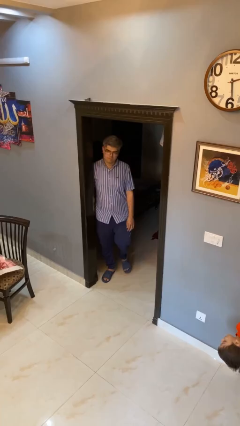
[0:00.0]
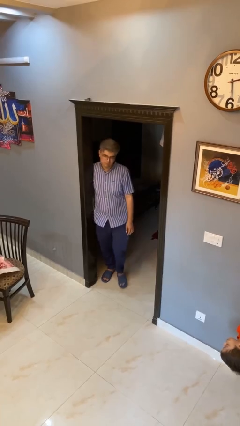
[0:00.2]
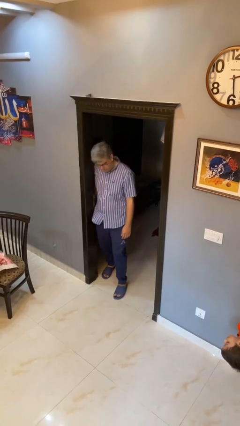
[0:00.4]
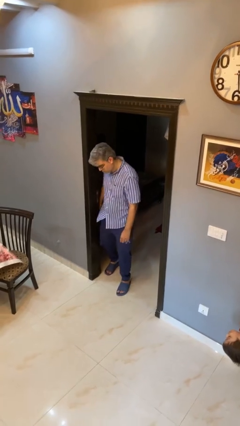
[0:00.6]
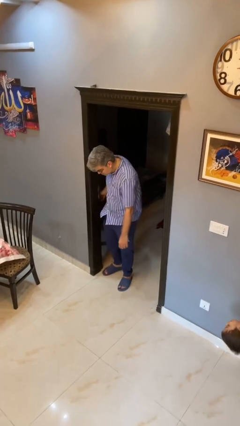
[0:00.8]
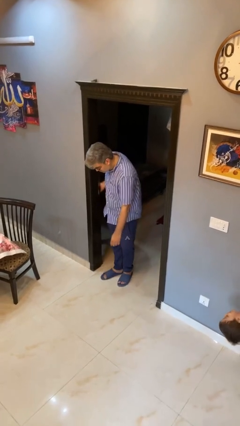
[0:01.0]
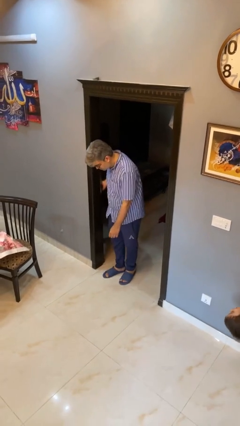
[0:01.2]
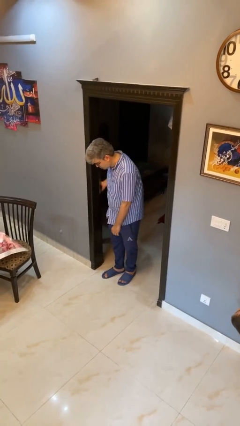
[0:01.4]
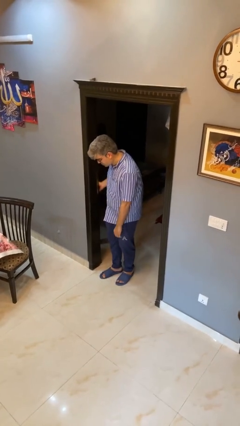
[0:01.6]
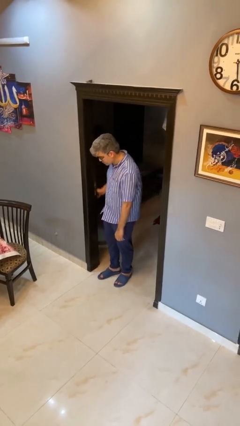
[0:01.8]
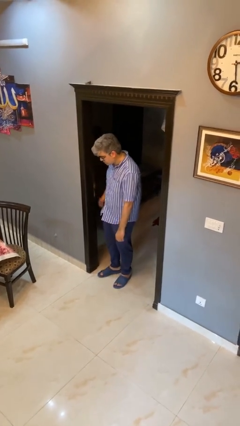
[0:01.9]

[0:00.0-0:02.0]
person bumps into wall

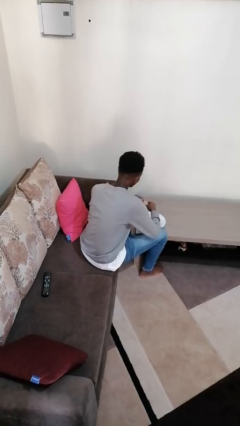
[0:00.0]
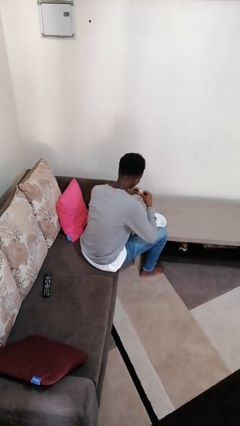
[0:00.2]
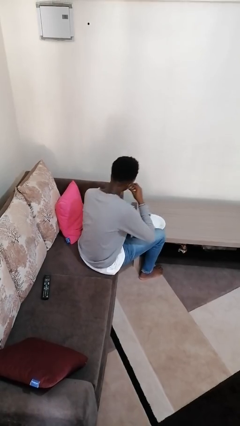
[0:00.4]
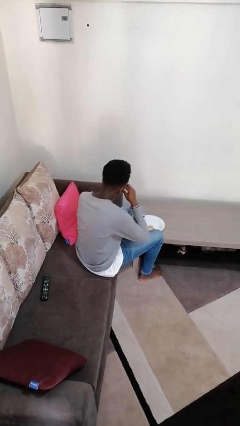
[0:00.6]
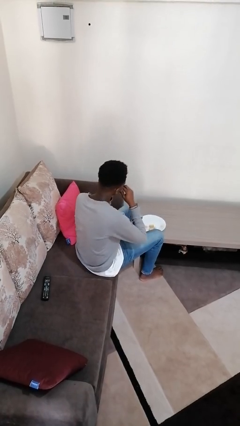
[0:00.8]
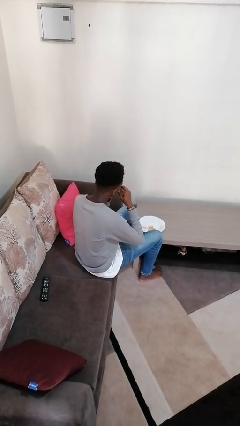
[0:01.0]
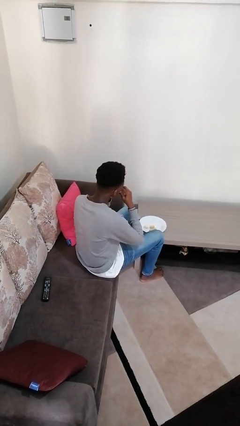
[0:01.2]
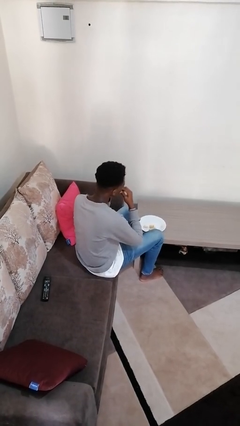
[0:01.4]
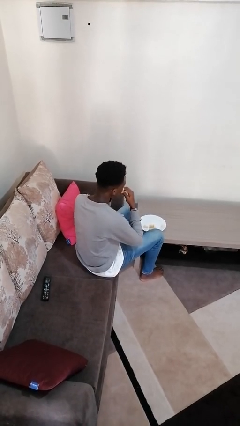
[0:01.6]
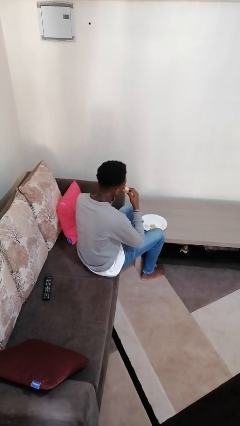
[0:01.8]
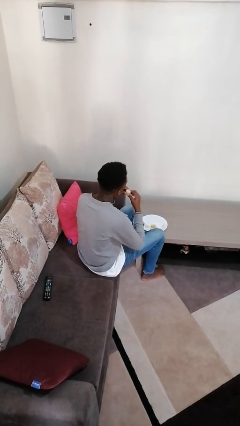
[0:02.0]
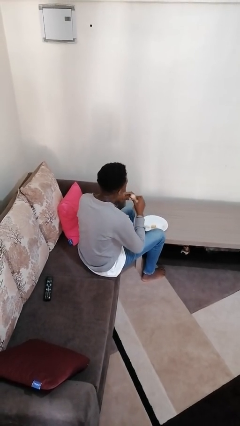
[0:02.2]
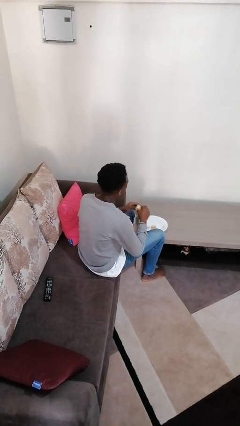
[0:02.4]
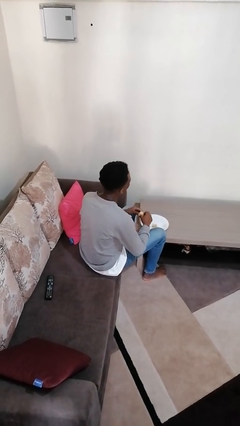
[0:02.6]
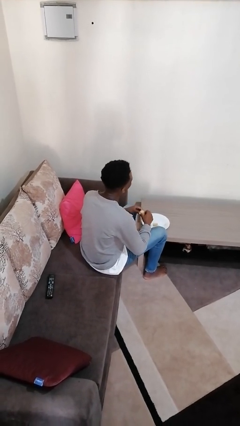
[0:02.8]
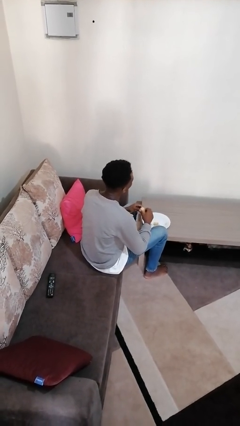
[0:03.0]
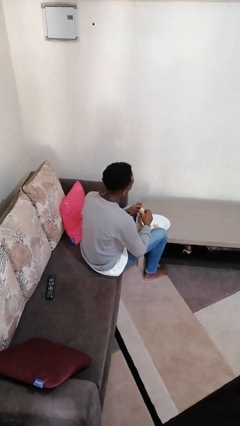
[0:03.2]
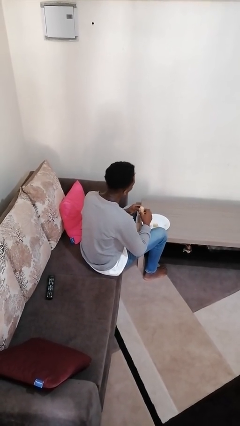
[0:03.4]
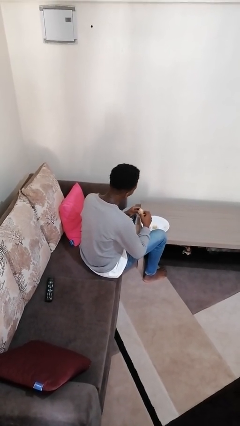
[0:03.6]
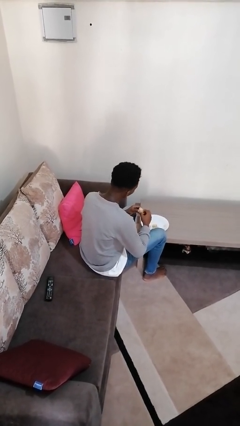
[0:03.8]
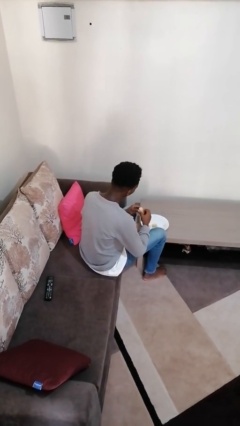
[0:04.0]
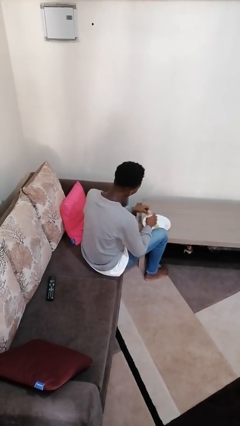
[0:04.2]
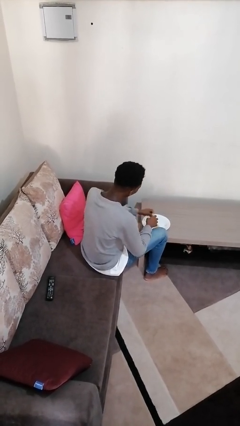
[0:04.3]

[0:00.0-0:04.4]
person eats with hands

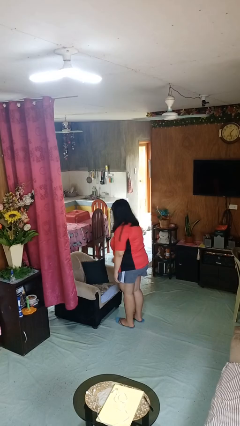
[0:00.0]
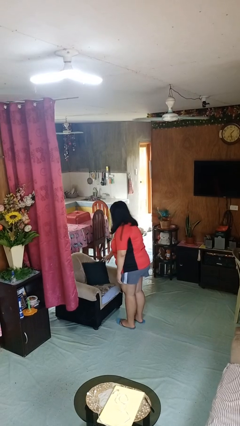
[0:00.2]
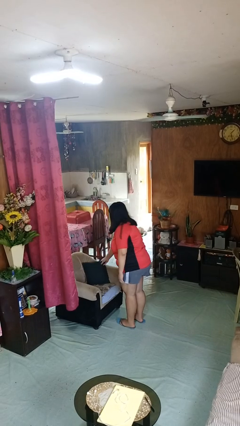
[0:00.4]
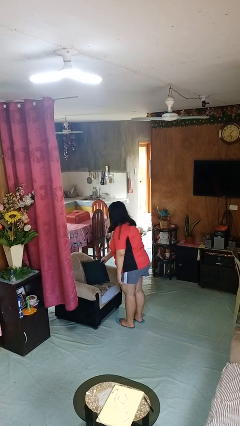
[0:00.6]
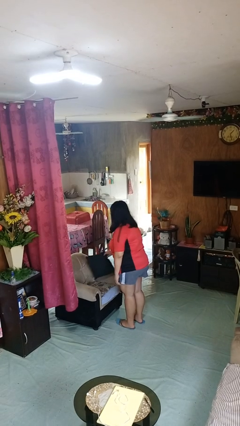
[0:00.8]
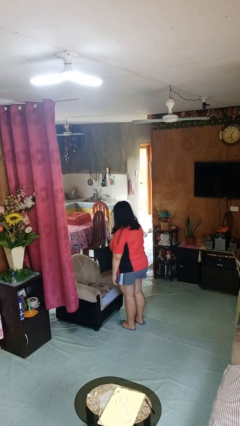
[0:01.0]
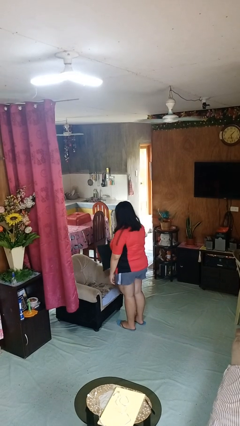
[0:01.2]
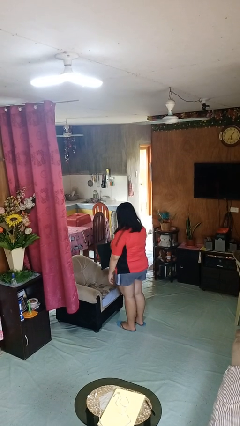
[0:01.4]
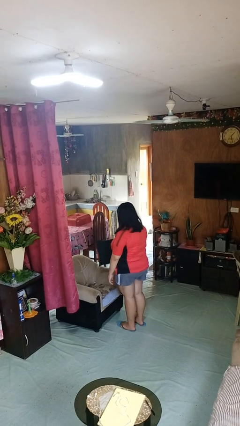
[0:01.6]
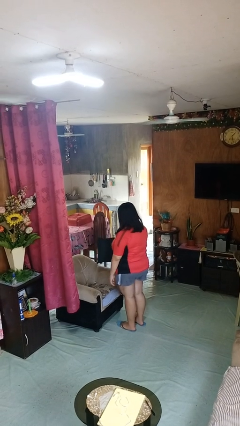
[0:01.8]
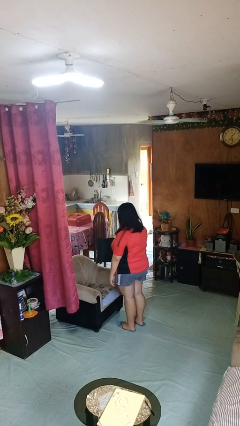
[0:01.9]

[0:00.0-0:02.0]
person picks up object from couch

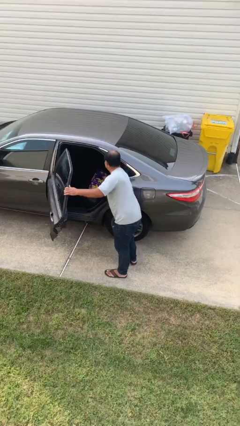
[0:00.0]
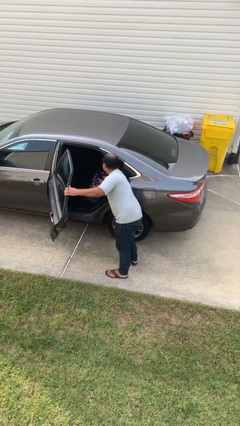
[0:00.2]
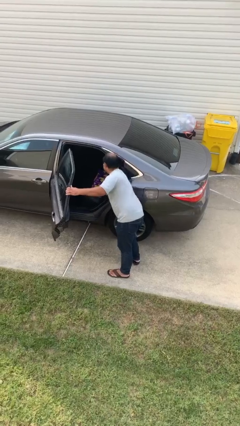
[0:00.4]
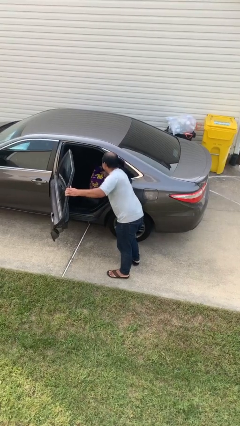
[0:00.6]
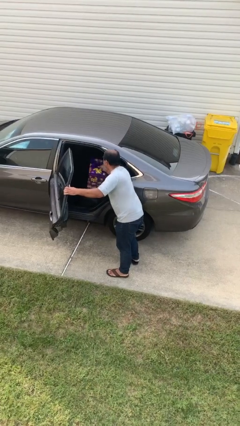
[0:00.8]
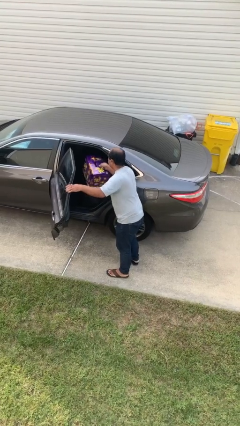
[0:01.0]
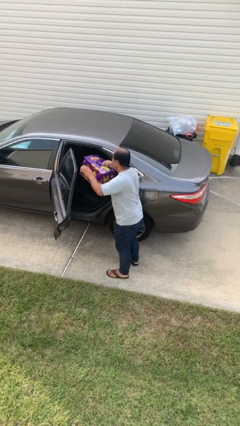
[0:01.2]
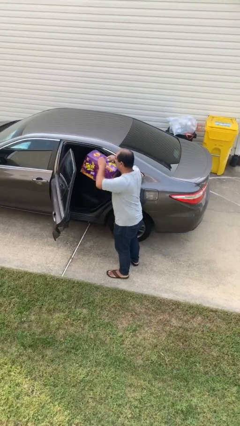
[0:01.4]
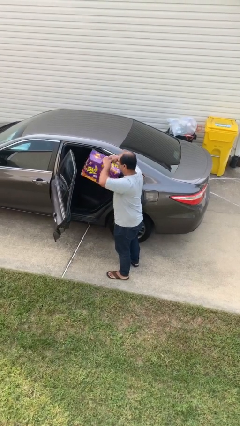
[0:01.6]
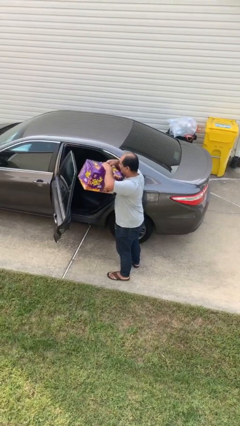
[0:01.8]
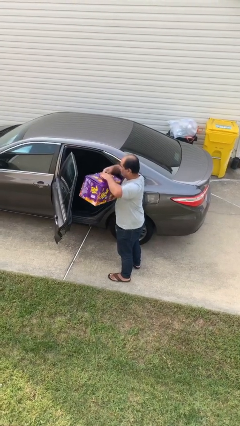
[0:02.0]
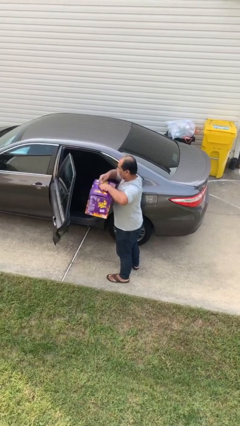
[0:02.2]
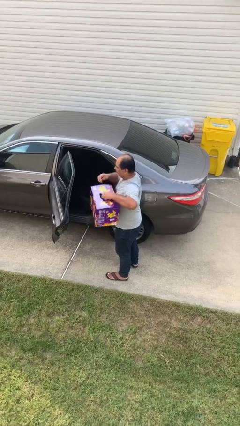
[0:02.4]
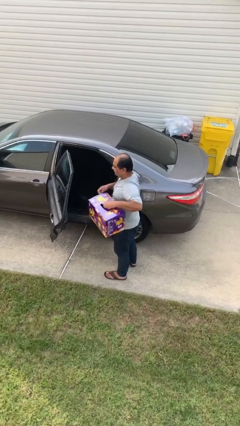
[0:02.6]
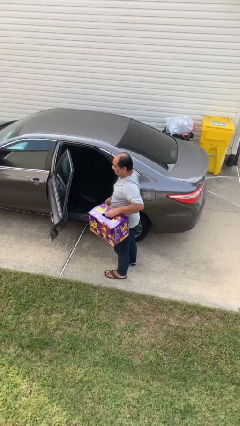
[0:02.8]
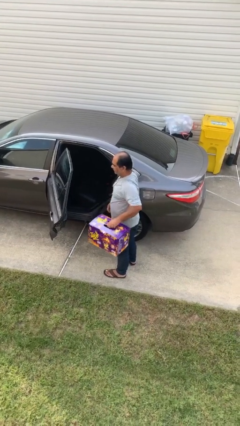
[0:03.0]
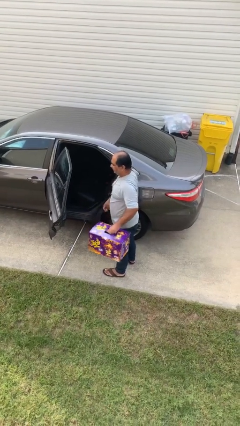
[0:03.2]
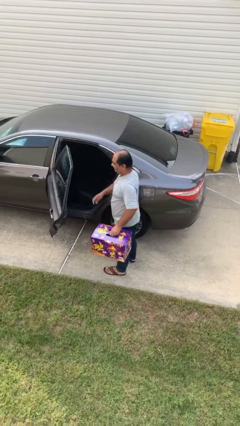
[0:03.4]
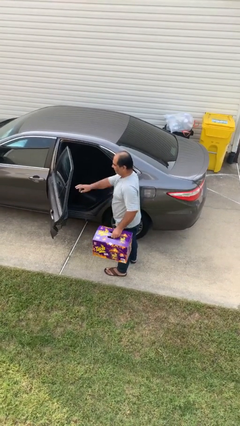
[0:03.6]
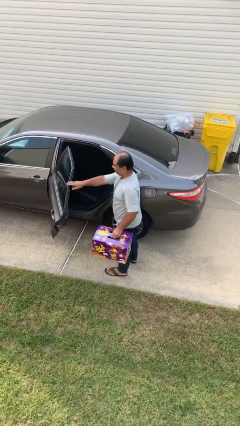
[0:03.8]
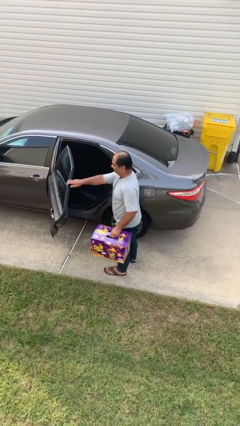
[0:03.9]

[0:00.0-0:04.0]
person unloads car

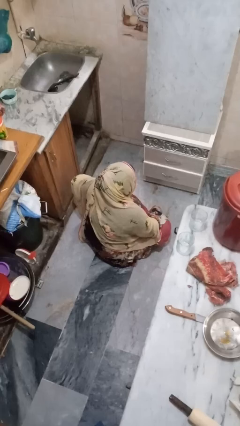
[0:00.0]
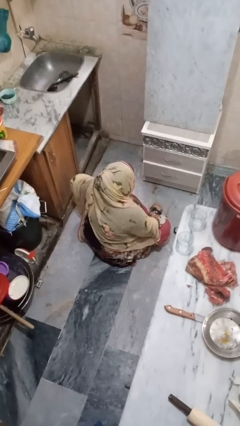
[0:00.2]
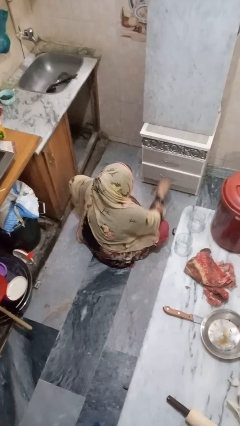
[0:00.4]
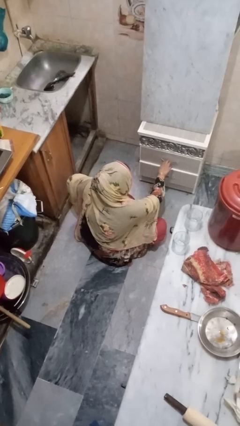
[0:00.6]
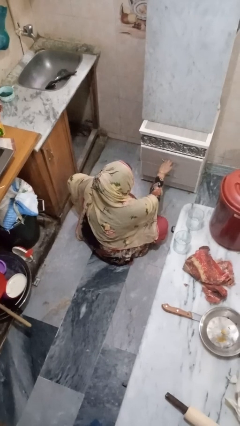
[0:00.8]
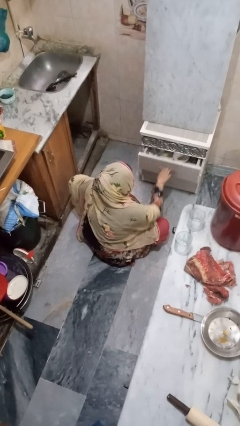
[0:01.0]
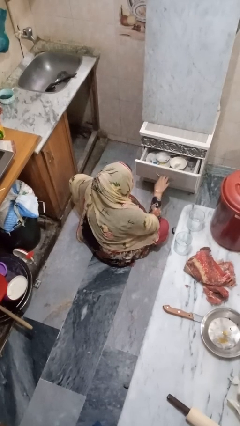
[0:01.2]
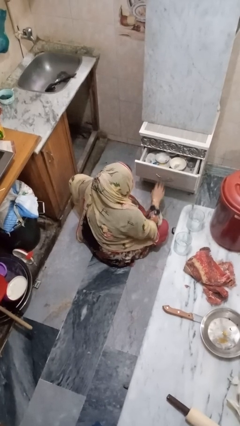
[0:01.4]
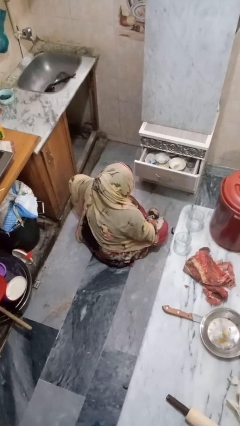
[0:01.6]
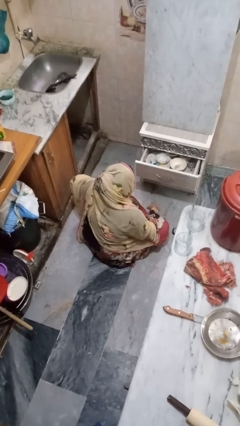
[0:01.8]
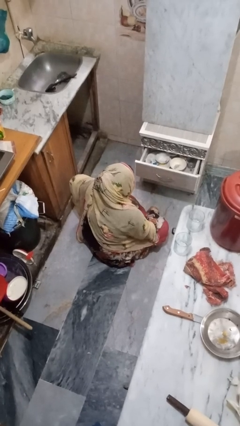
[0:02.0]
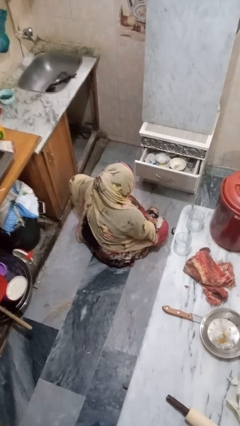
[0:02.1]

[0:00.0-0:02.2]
person opens kitchen drawer

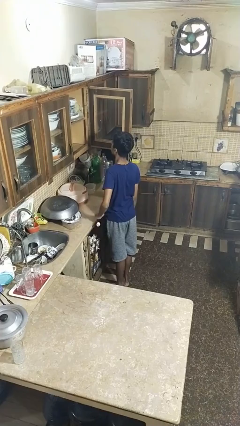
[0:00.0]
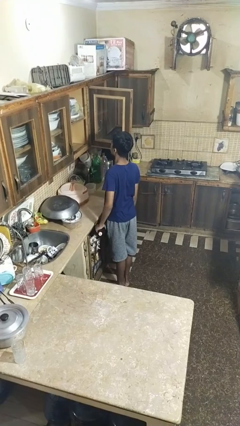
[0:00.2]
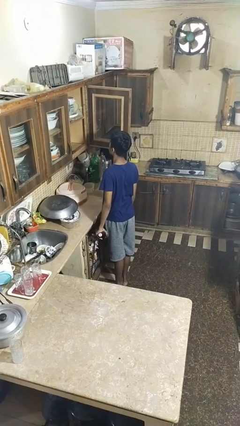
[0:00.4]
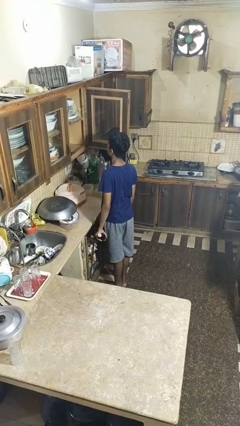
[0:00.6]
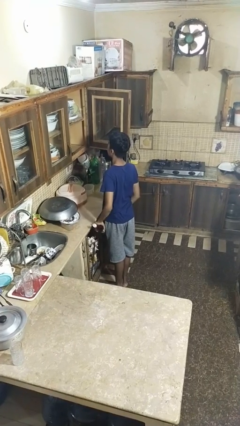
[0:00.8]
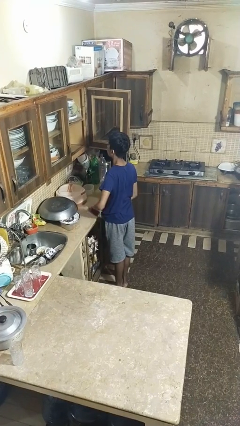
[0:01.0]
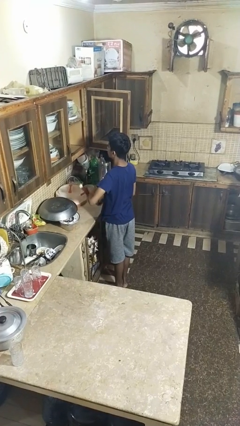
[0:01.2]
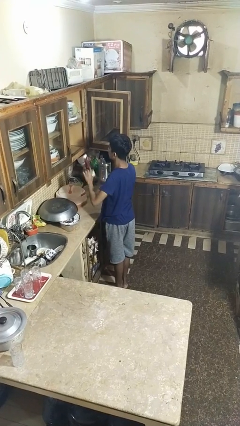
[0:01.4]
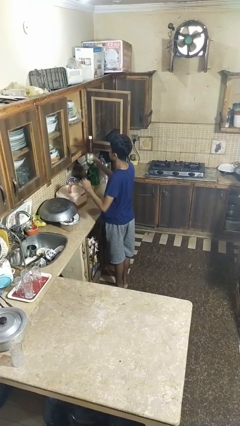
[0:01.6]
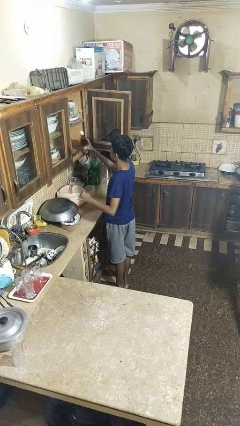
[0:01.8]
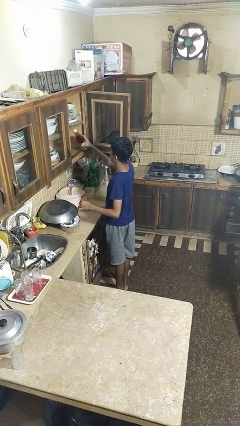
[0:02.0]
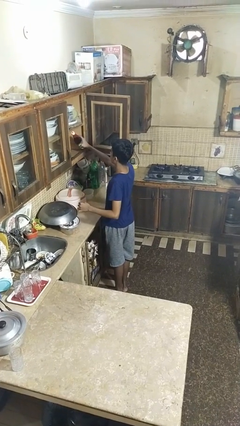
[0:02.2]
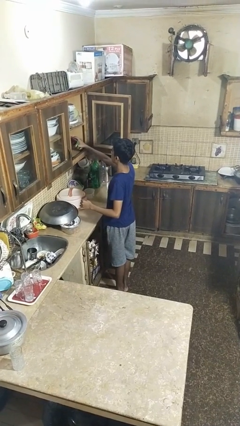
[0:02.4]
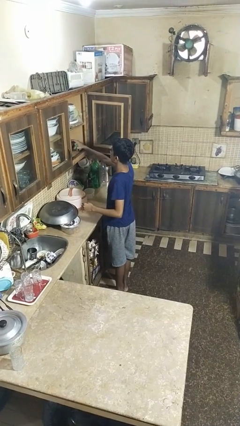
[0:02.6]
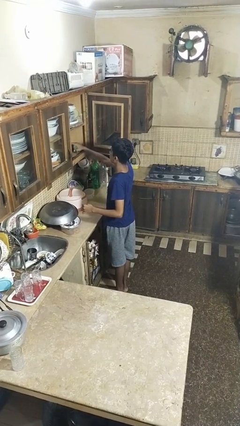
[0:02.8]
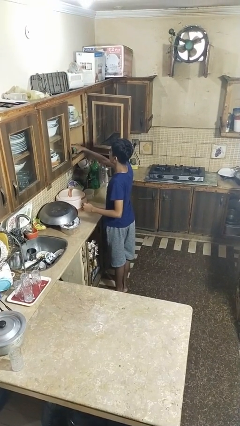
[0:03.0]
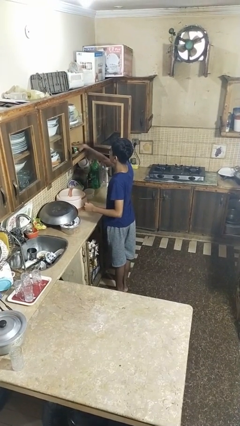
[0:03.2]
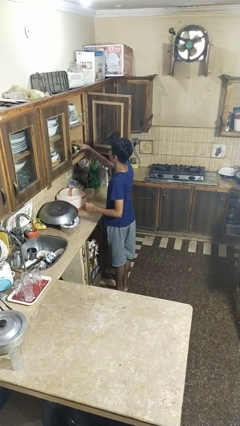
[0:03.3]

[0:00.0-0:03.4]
person puts object in cabinet
